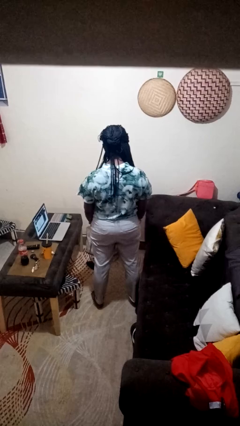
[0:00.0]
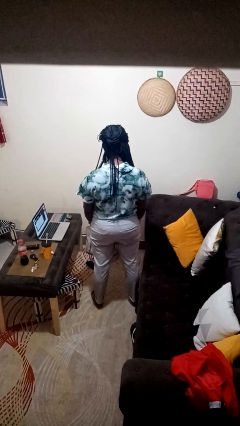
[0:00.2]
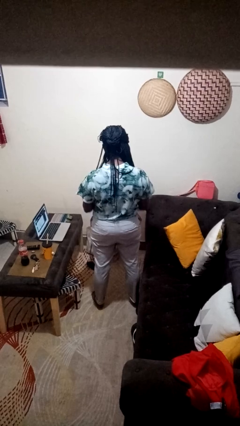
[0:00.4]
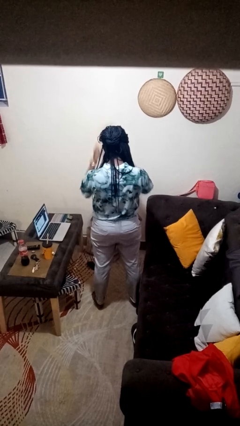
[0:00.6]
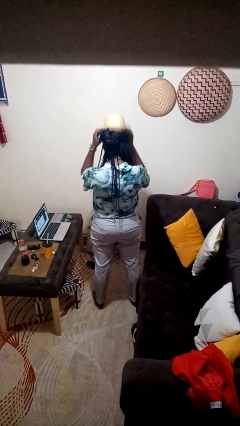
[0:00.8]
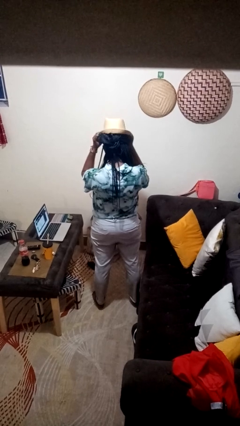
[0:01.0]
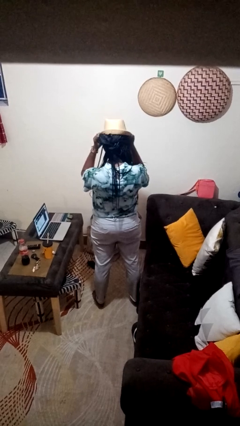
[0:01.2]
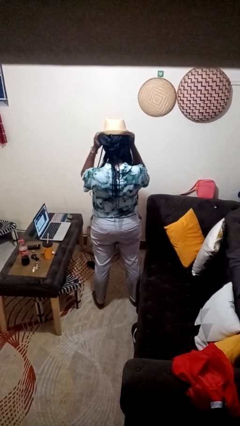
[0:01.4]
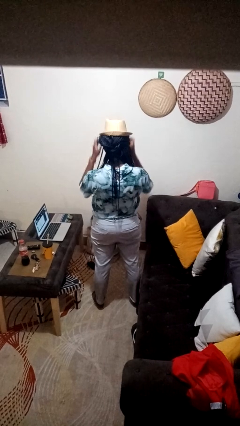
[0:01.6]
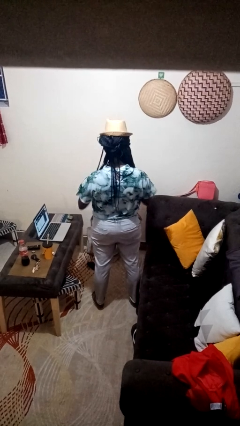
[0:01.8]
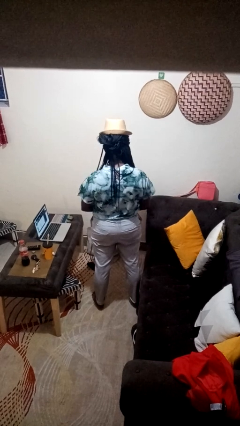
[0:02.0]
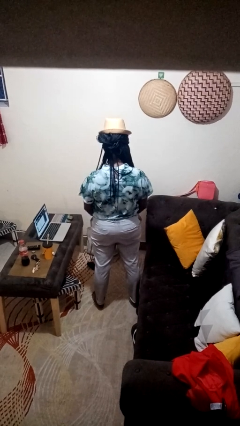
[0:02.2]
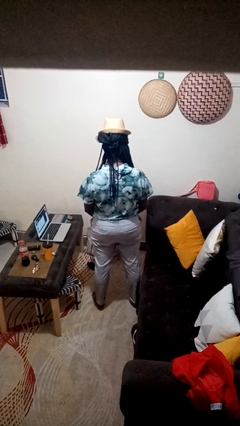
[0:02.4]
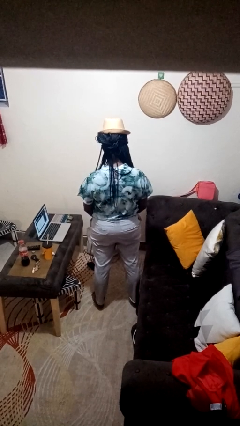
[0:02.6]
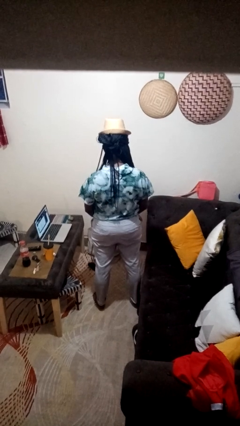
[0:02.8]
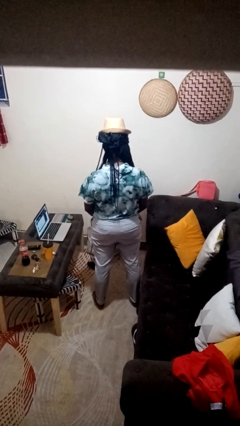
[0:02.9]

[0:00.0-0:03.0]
person puts on hat

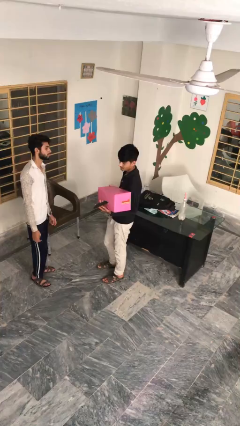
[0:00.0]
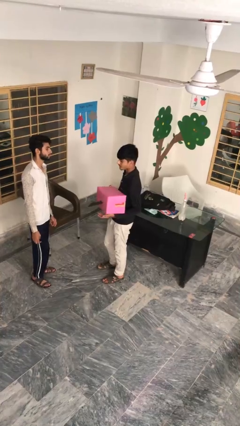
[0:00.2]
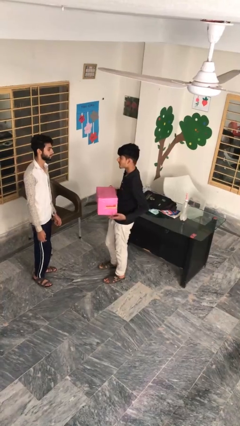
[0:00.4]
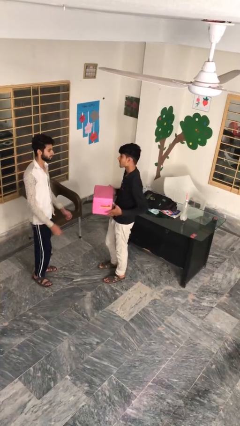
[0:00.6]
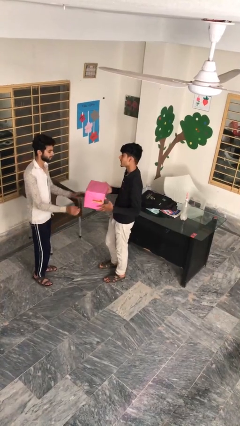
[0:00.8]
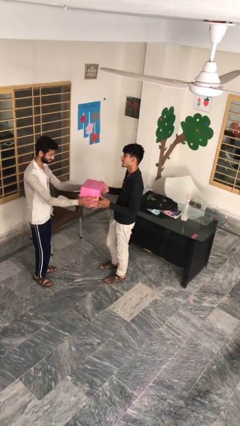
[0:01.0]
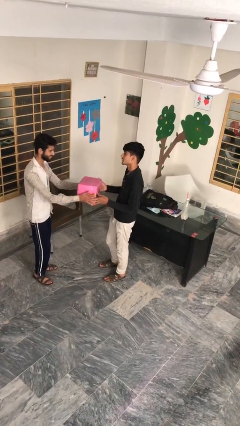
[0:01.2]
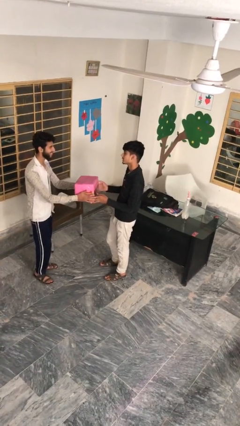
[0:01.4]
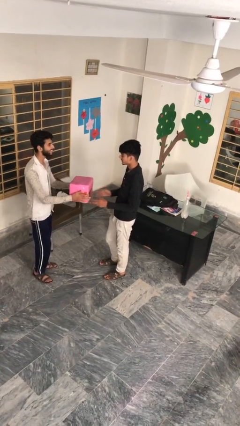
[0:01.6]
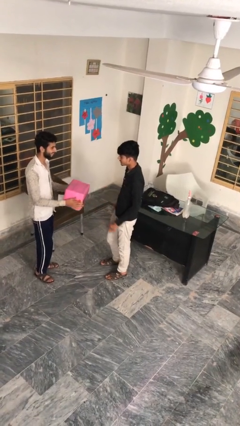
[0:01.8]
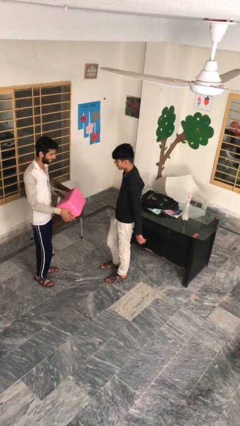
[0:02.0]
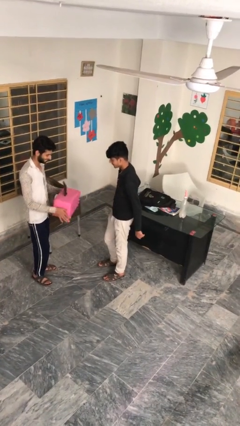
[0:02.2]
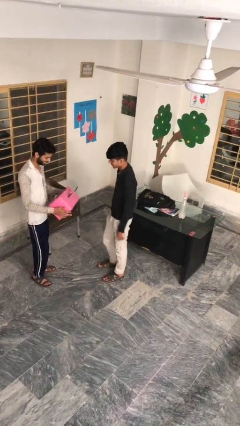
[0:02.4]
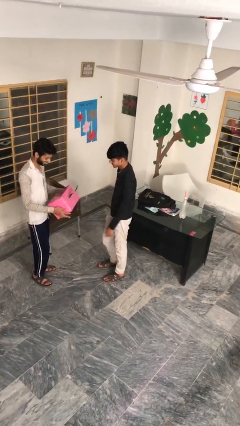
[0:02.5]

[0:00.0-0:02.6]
person transfers object to person

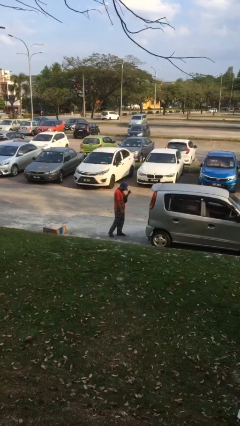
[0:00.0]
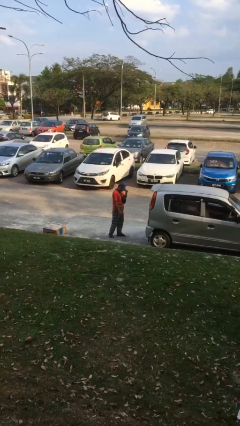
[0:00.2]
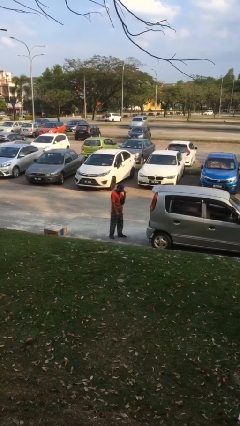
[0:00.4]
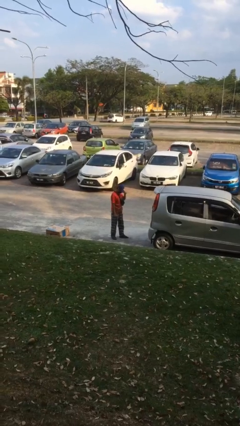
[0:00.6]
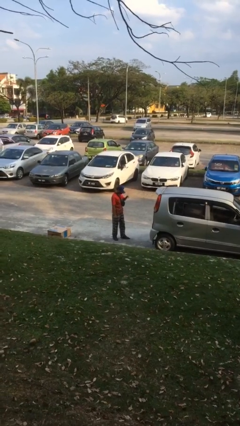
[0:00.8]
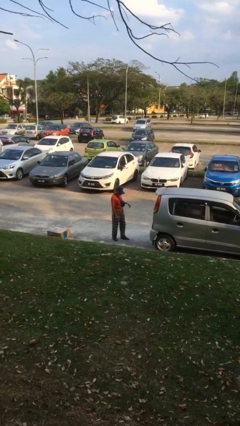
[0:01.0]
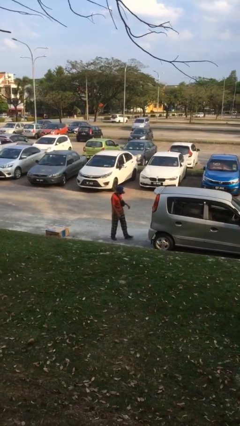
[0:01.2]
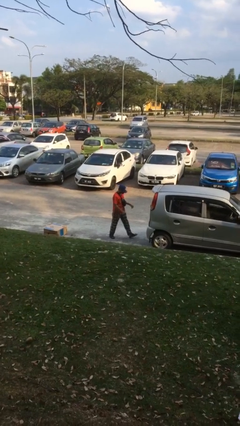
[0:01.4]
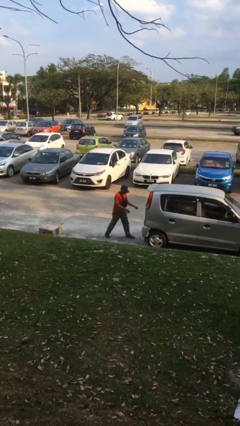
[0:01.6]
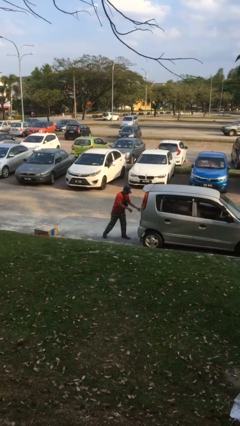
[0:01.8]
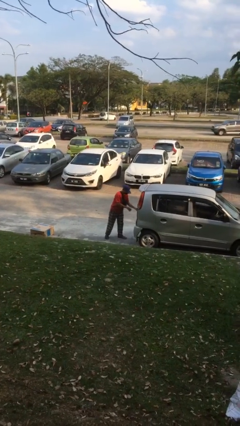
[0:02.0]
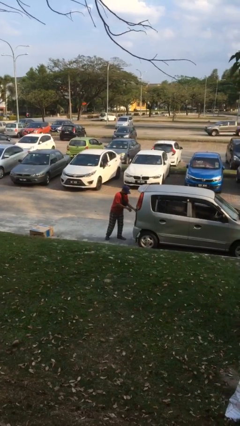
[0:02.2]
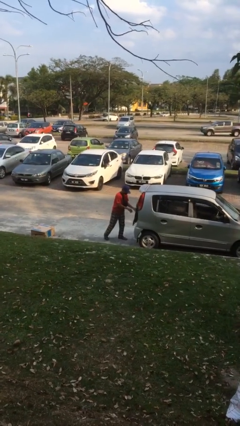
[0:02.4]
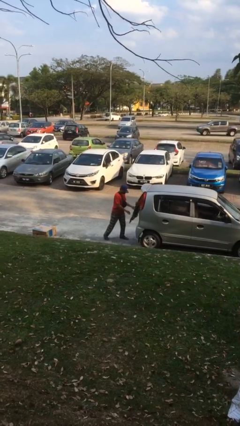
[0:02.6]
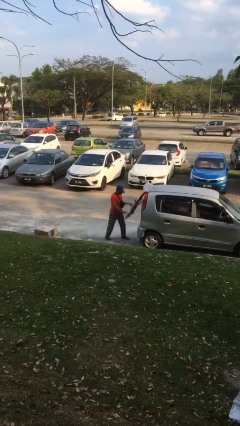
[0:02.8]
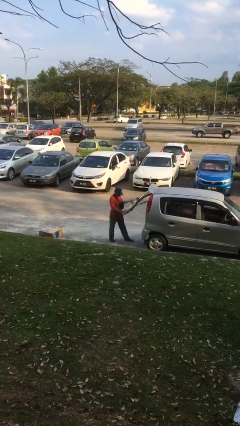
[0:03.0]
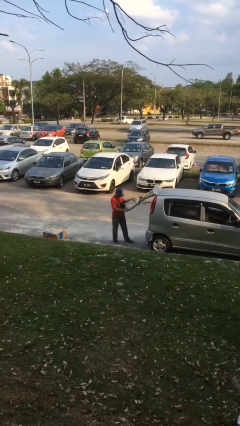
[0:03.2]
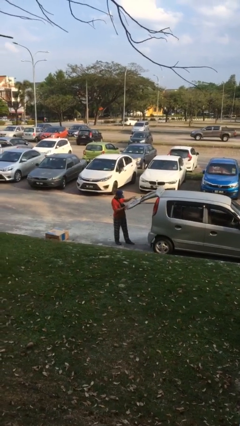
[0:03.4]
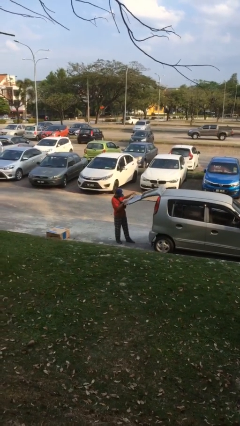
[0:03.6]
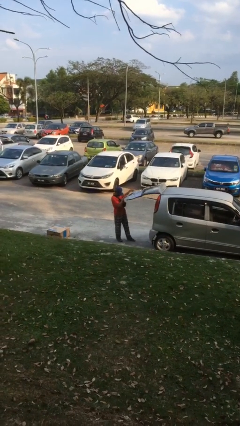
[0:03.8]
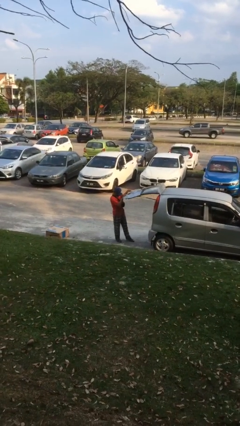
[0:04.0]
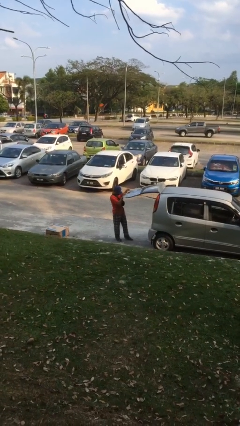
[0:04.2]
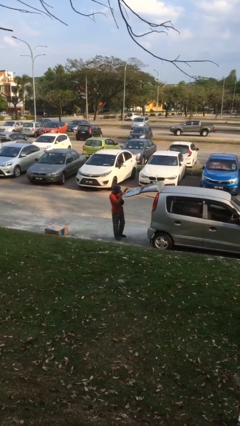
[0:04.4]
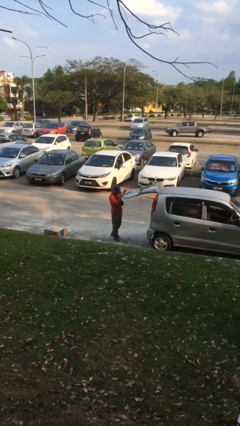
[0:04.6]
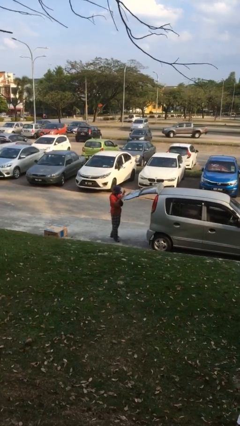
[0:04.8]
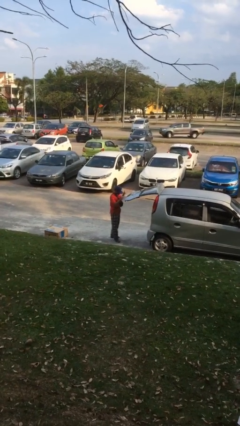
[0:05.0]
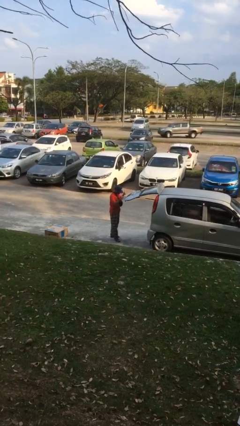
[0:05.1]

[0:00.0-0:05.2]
person opens car trunk

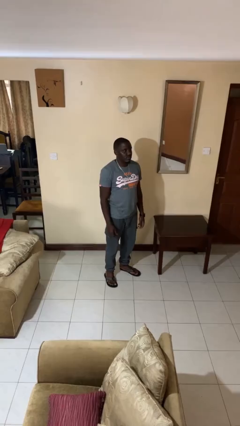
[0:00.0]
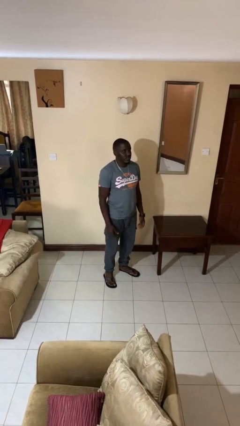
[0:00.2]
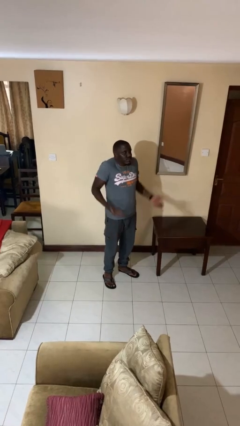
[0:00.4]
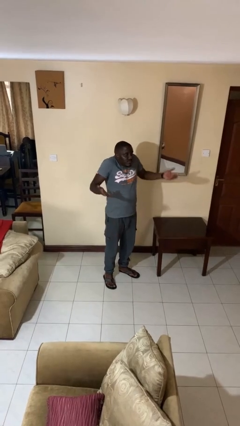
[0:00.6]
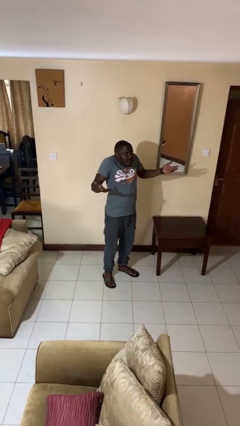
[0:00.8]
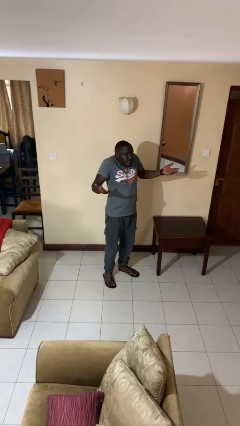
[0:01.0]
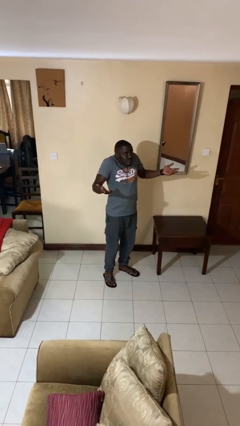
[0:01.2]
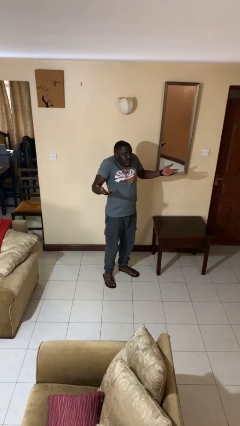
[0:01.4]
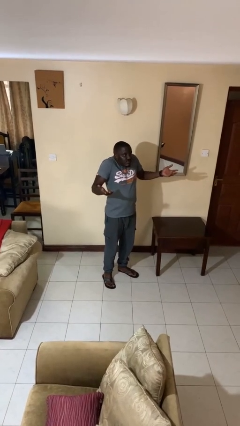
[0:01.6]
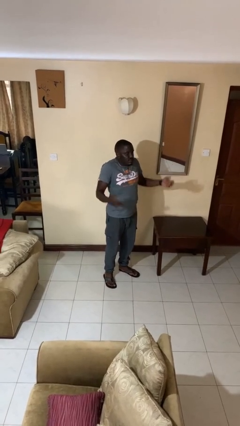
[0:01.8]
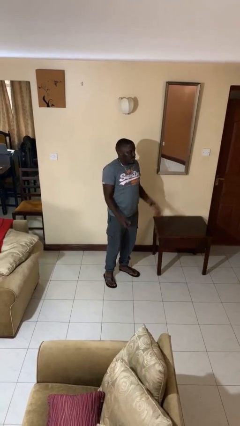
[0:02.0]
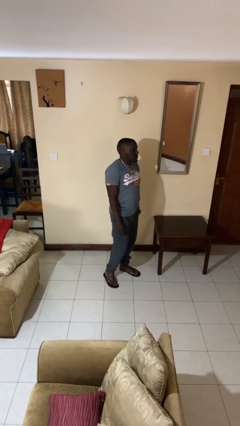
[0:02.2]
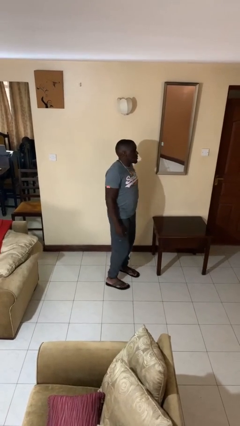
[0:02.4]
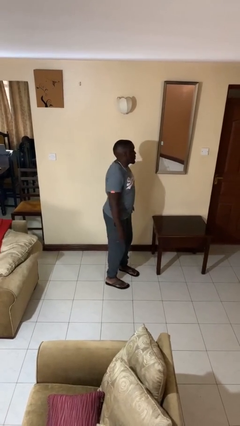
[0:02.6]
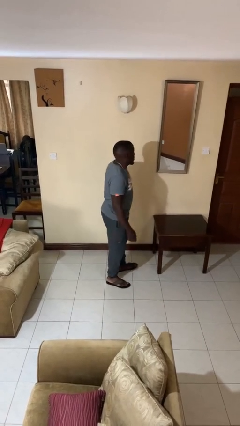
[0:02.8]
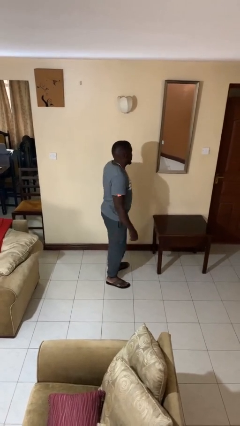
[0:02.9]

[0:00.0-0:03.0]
person shrugs

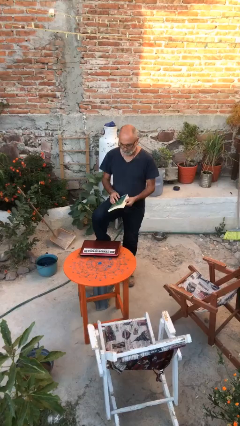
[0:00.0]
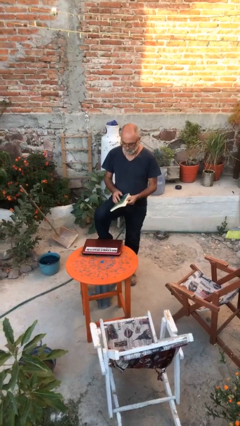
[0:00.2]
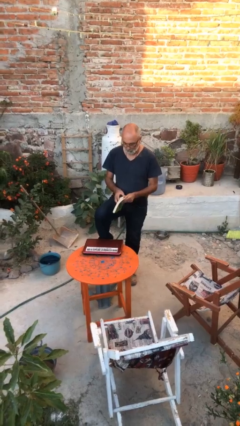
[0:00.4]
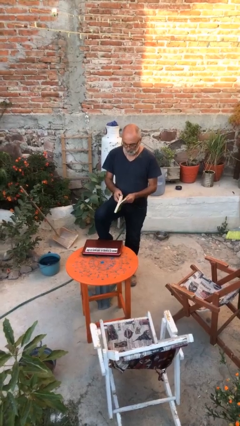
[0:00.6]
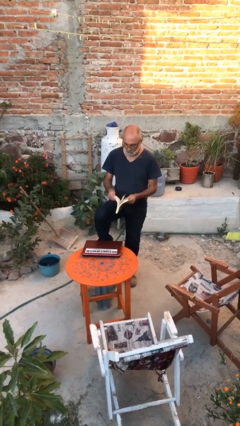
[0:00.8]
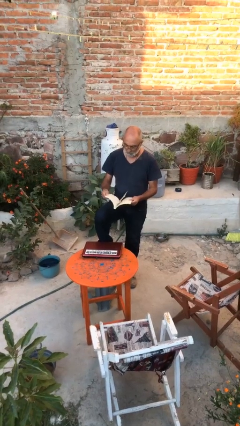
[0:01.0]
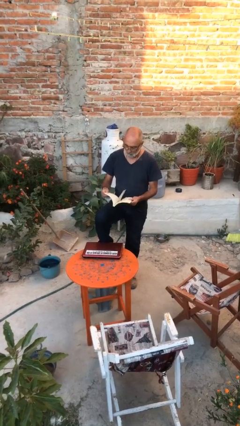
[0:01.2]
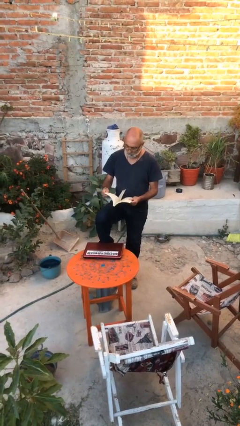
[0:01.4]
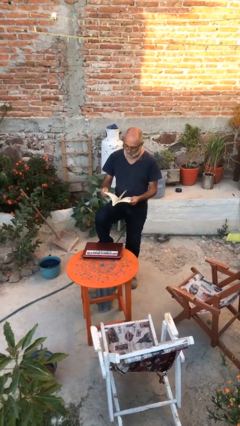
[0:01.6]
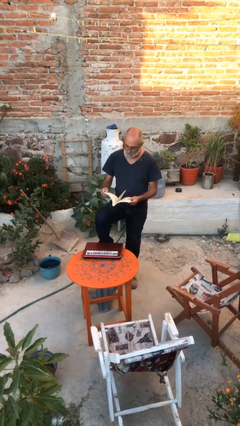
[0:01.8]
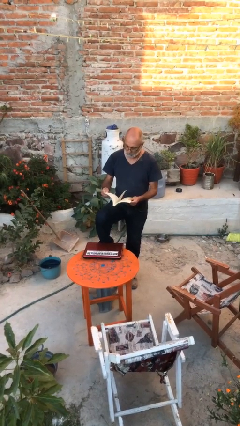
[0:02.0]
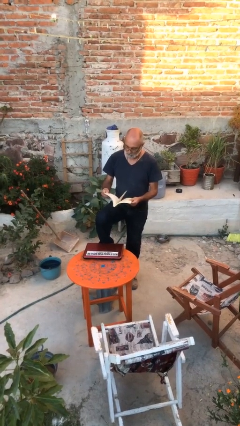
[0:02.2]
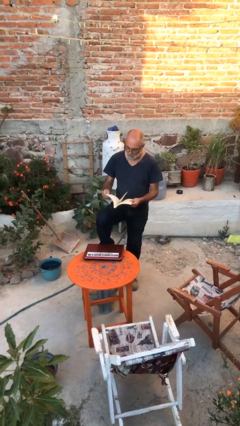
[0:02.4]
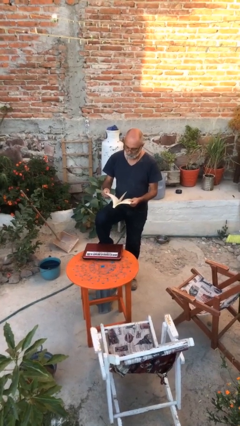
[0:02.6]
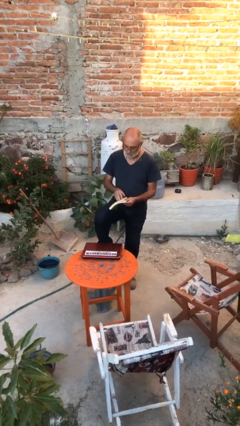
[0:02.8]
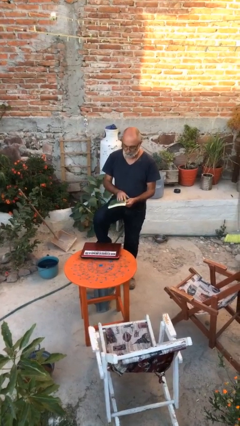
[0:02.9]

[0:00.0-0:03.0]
person reads document

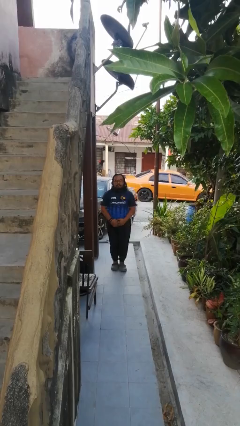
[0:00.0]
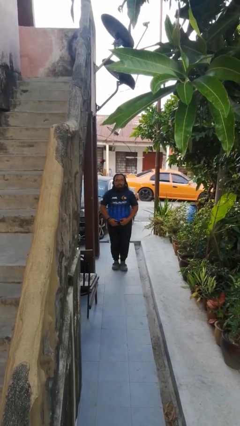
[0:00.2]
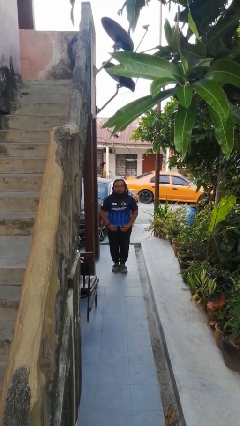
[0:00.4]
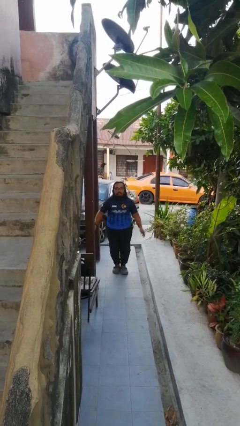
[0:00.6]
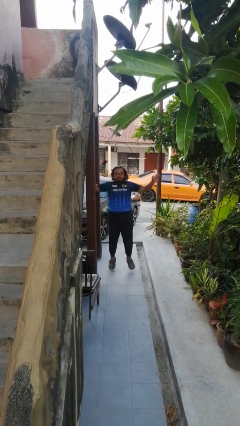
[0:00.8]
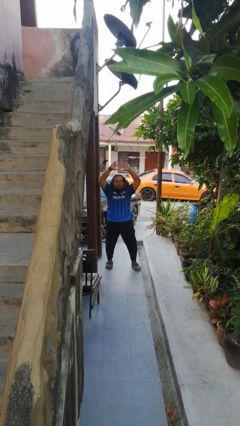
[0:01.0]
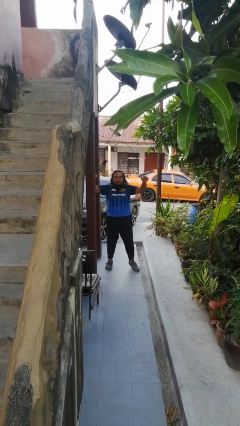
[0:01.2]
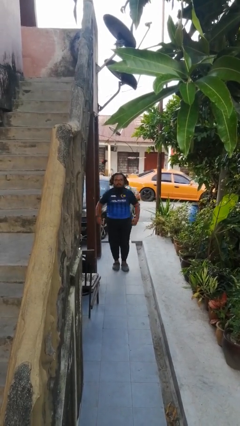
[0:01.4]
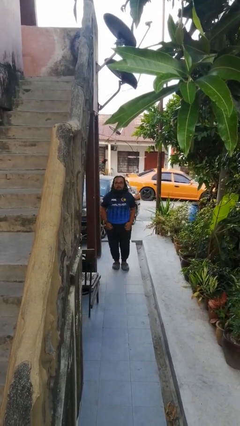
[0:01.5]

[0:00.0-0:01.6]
person exercises with jumping jacks
